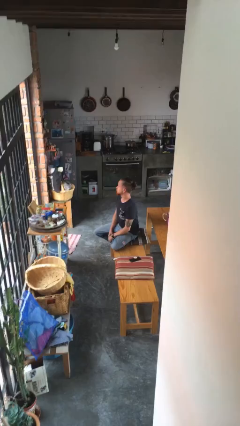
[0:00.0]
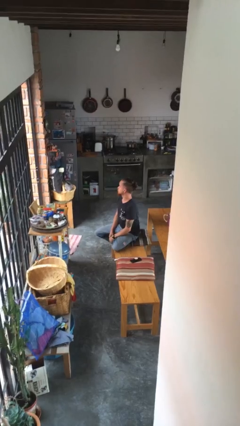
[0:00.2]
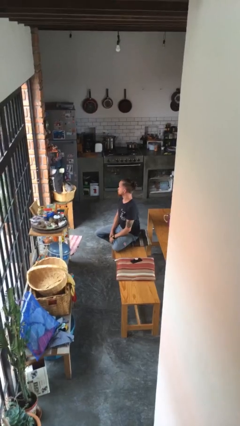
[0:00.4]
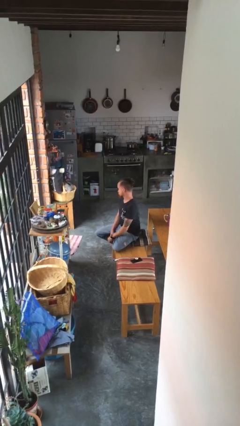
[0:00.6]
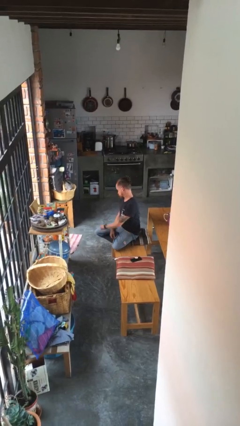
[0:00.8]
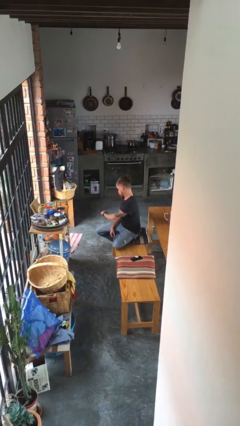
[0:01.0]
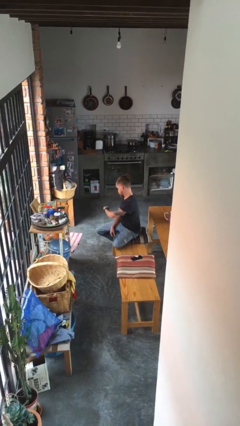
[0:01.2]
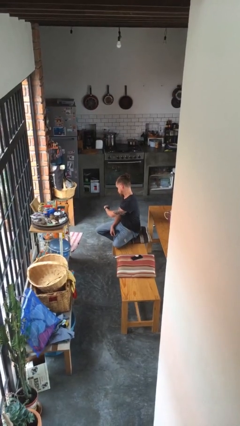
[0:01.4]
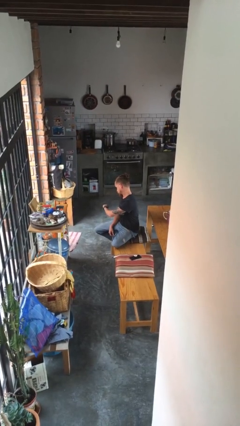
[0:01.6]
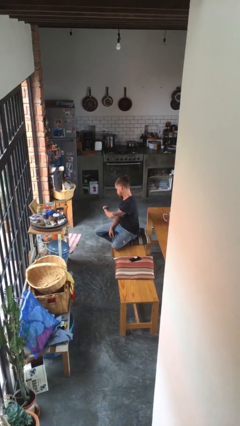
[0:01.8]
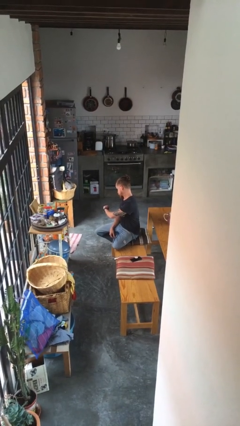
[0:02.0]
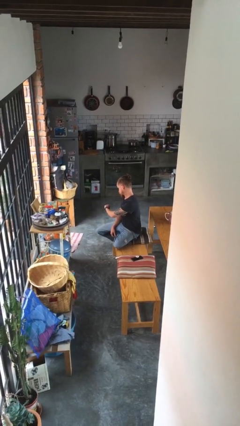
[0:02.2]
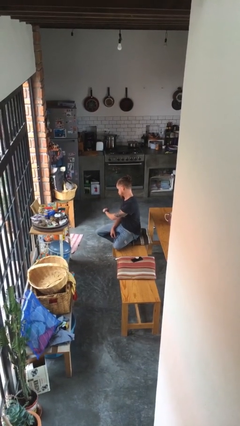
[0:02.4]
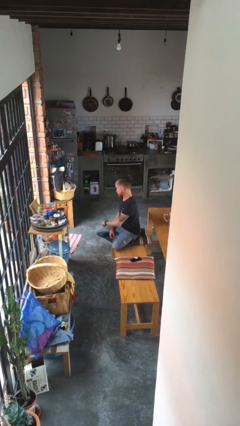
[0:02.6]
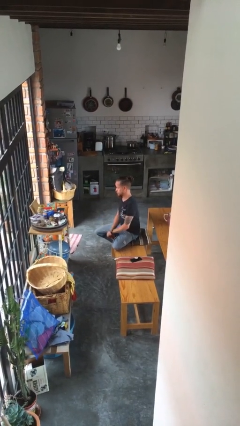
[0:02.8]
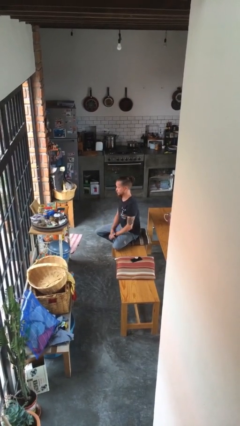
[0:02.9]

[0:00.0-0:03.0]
person looks at wristwatch

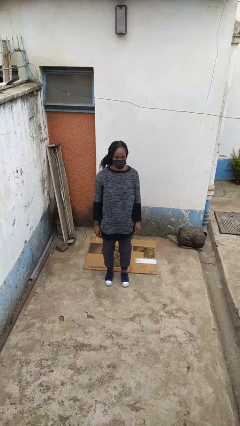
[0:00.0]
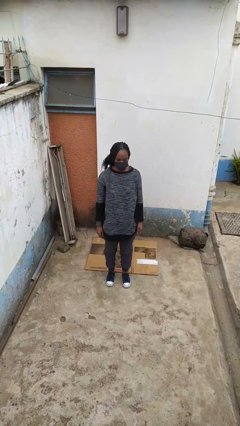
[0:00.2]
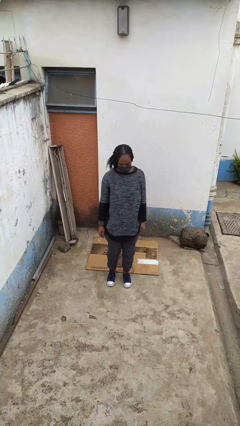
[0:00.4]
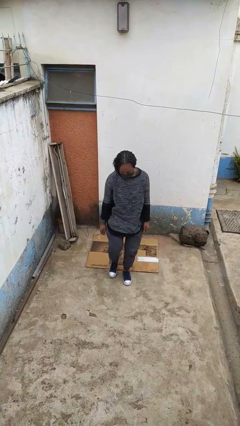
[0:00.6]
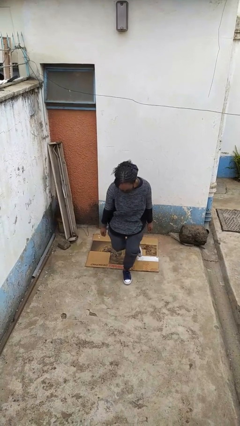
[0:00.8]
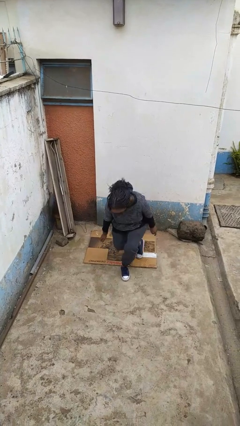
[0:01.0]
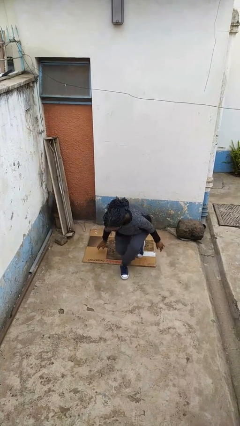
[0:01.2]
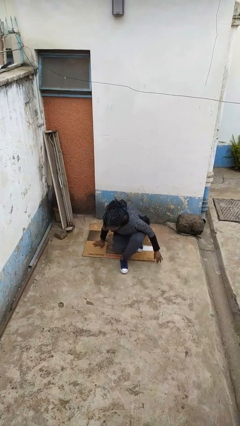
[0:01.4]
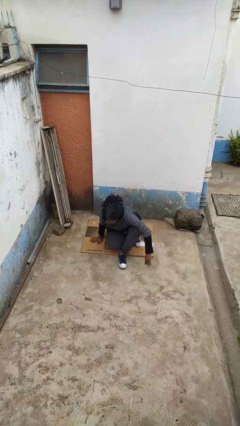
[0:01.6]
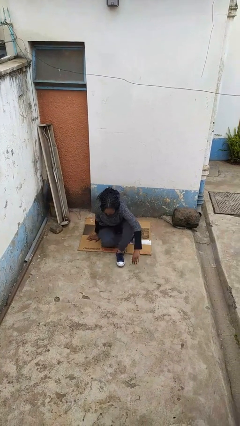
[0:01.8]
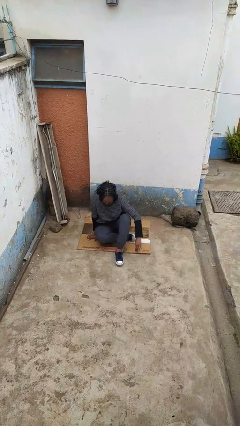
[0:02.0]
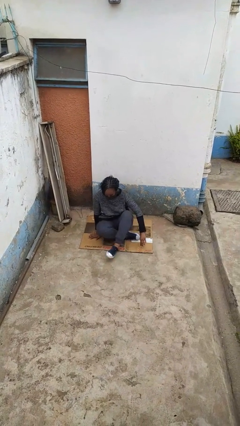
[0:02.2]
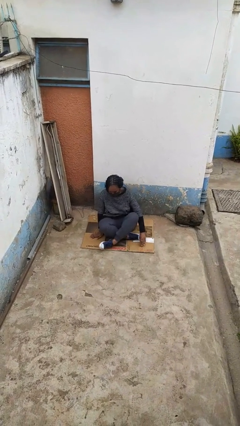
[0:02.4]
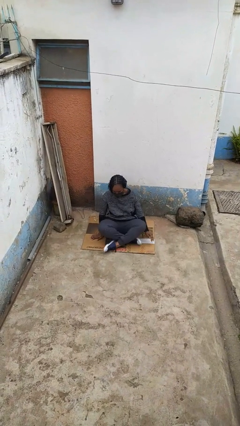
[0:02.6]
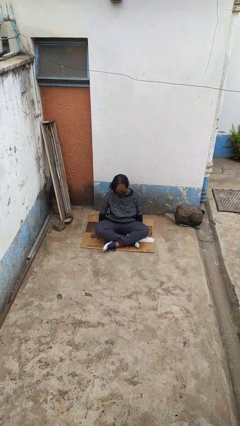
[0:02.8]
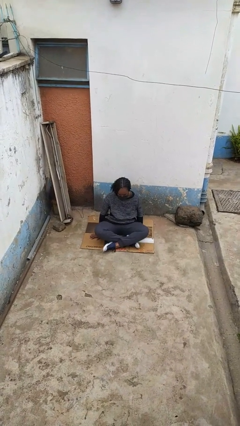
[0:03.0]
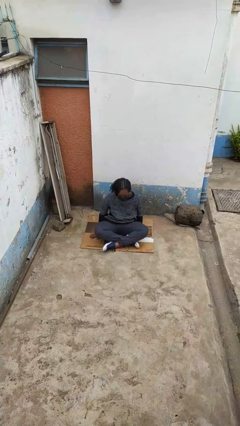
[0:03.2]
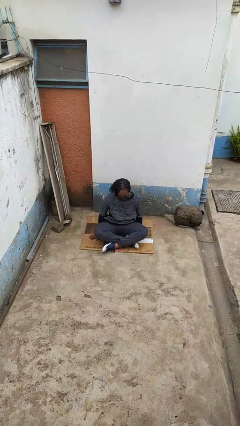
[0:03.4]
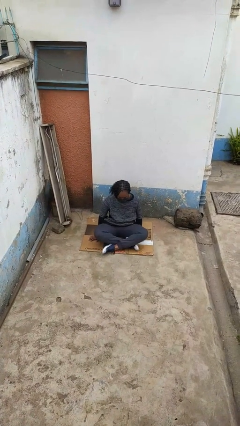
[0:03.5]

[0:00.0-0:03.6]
person sits crisscross

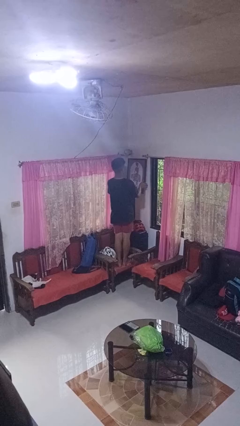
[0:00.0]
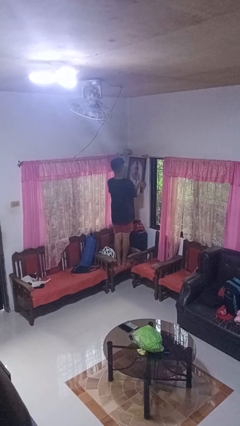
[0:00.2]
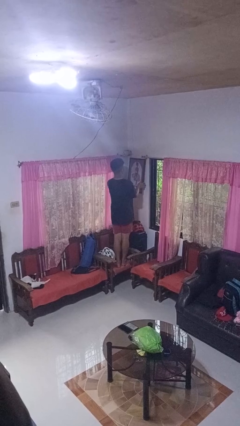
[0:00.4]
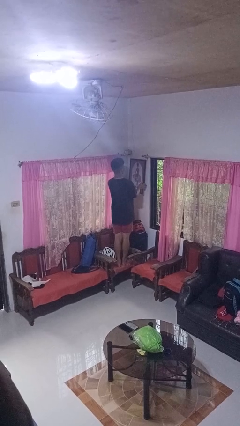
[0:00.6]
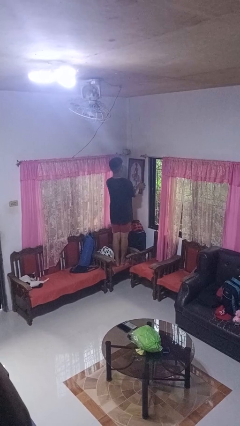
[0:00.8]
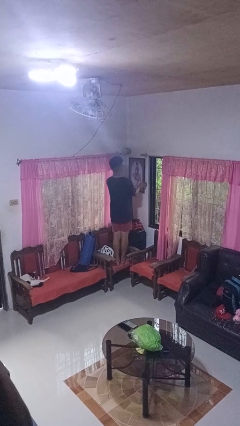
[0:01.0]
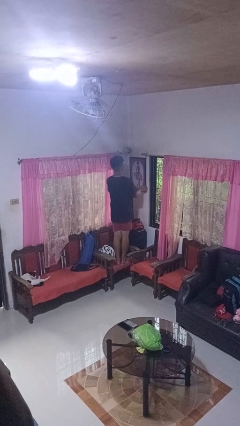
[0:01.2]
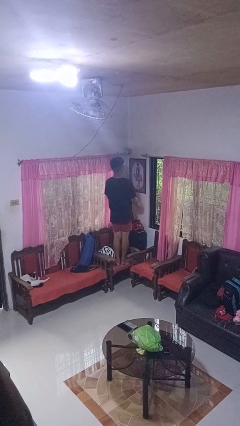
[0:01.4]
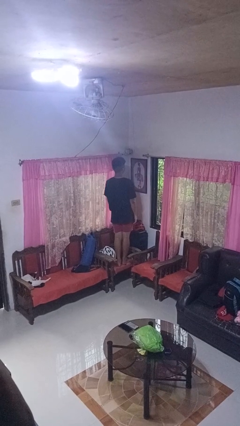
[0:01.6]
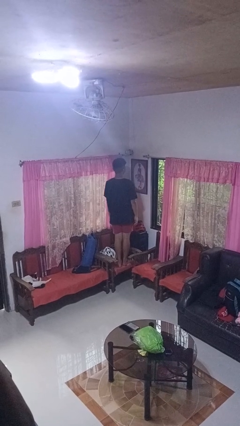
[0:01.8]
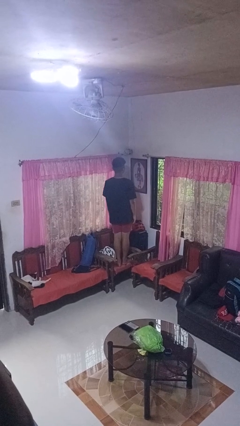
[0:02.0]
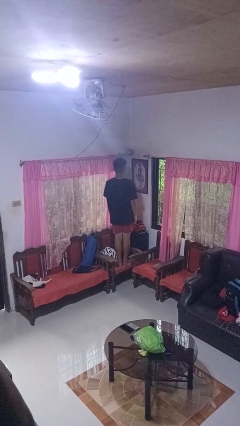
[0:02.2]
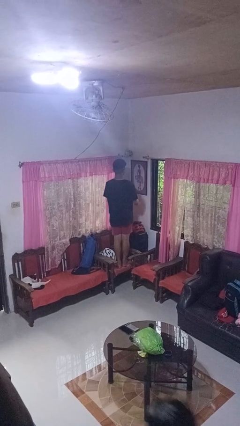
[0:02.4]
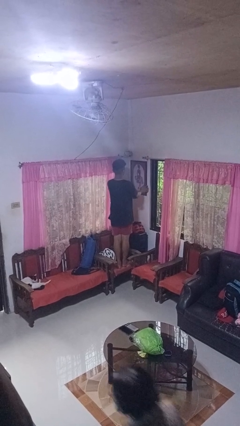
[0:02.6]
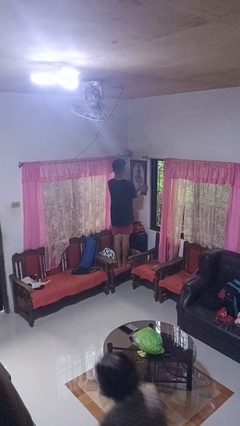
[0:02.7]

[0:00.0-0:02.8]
person puts up picture frame

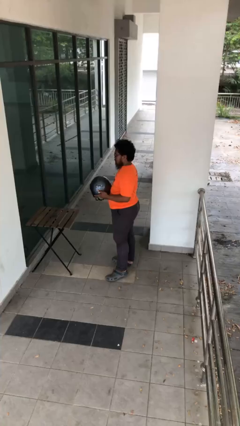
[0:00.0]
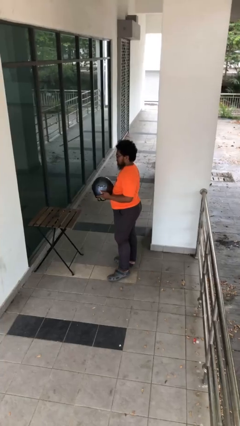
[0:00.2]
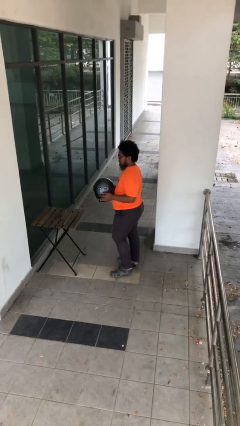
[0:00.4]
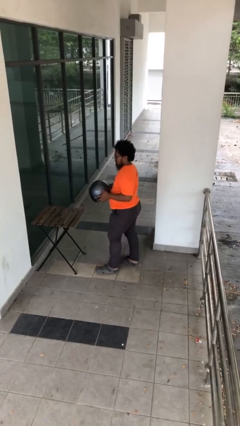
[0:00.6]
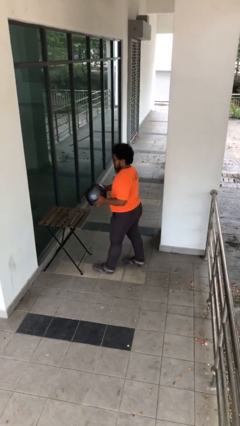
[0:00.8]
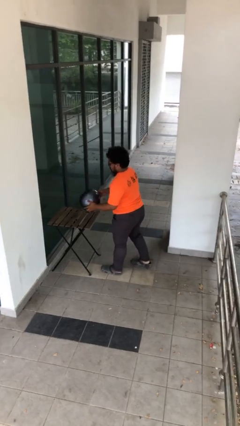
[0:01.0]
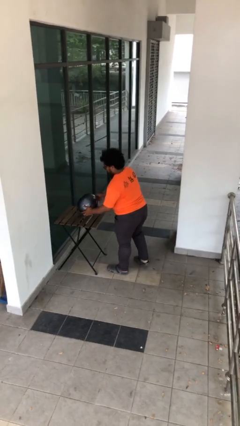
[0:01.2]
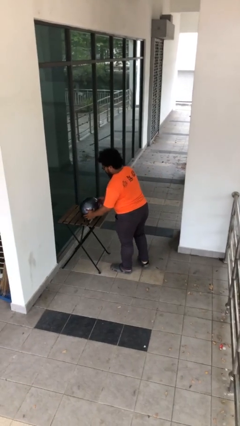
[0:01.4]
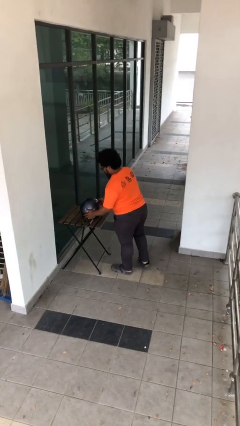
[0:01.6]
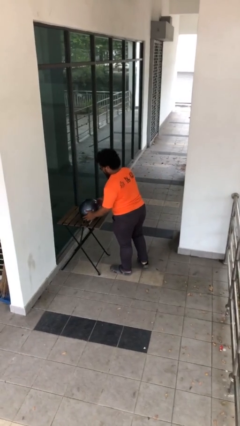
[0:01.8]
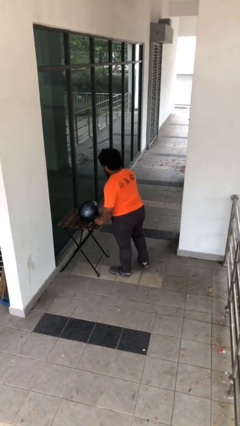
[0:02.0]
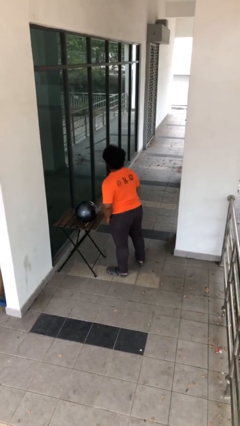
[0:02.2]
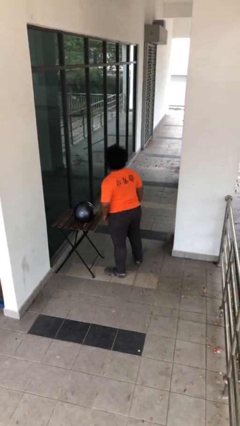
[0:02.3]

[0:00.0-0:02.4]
person puts down object on table

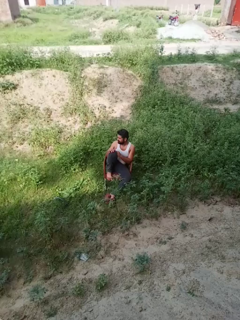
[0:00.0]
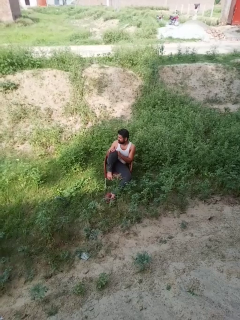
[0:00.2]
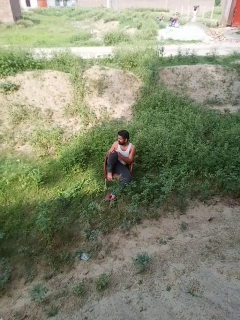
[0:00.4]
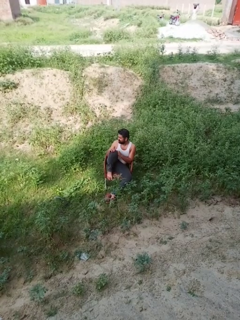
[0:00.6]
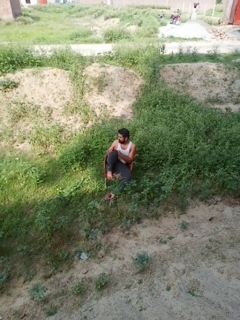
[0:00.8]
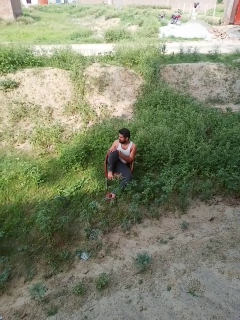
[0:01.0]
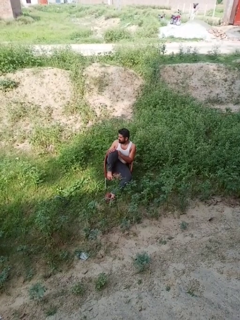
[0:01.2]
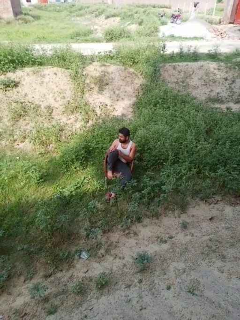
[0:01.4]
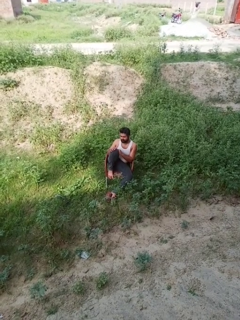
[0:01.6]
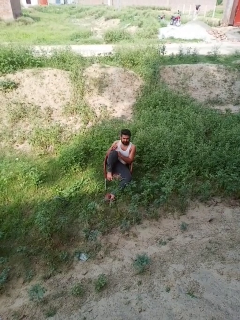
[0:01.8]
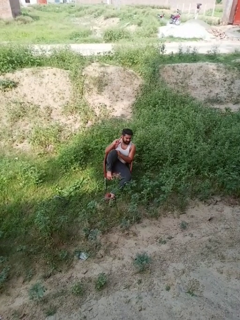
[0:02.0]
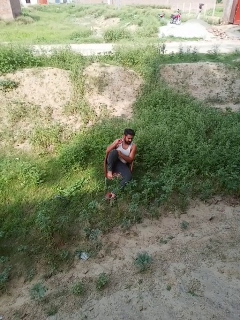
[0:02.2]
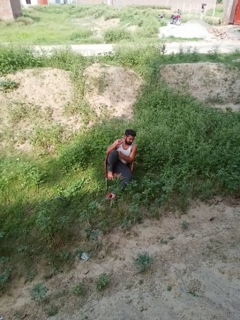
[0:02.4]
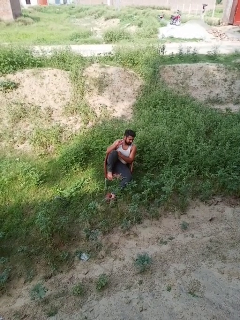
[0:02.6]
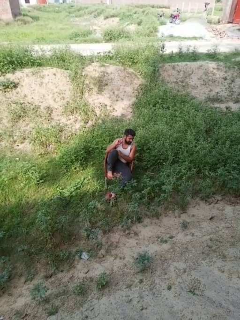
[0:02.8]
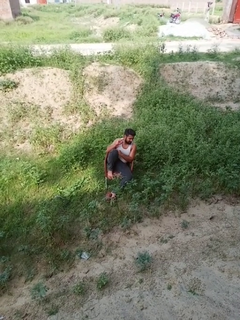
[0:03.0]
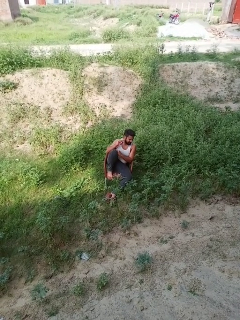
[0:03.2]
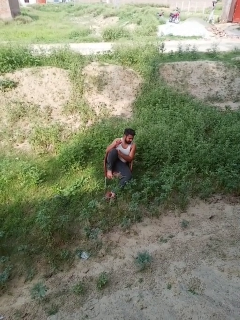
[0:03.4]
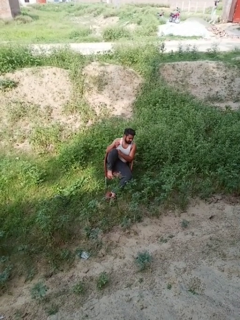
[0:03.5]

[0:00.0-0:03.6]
person touches earlobe

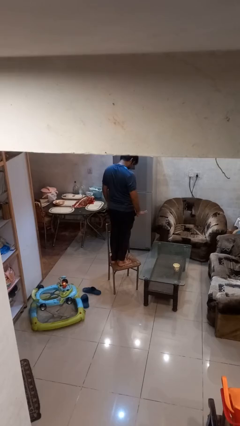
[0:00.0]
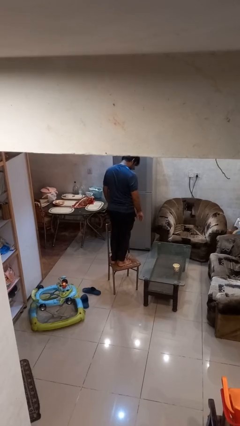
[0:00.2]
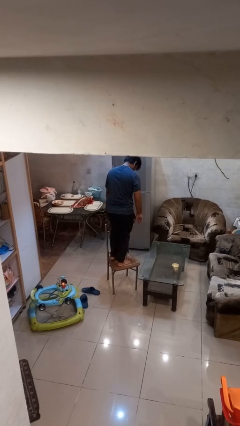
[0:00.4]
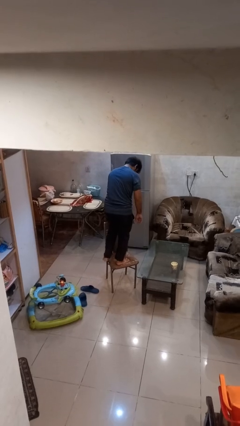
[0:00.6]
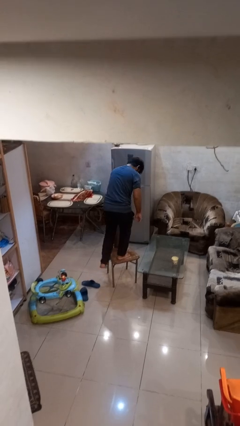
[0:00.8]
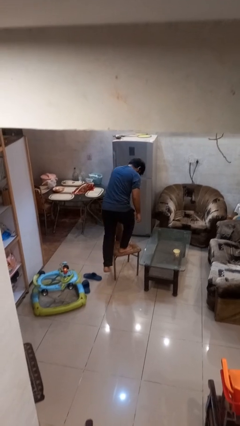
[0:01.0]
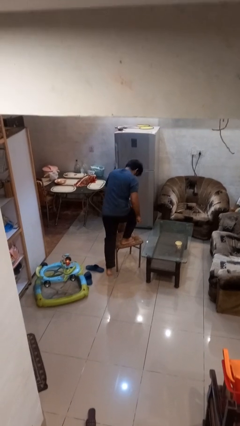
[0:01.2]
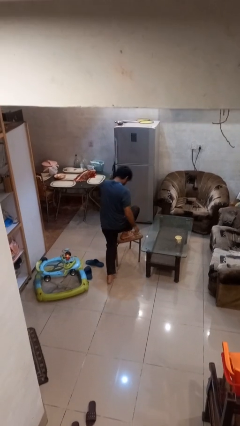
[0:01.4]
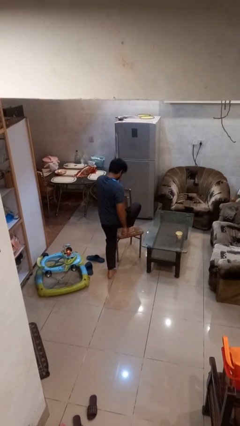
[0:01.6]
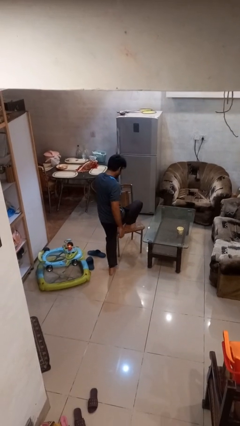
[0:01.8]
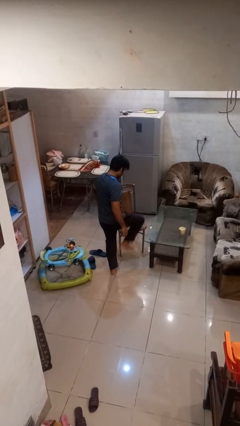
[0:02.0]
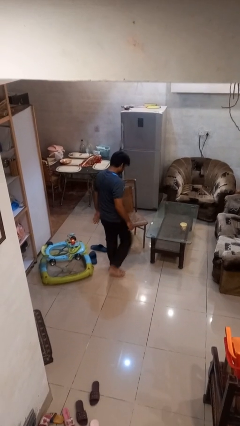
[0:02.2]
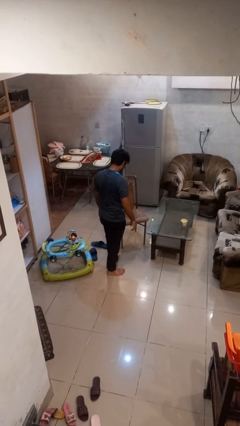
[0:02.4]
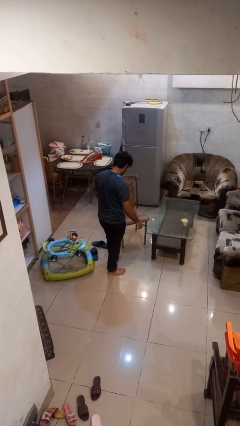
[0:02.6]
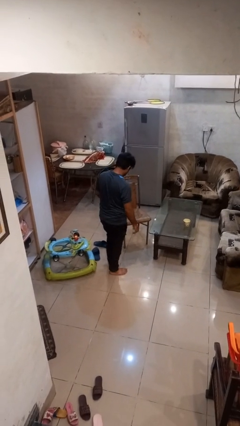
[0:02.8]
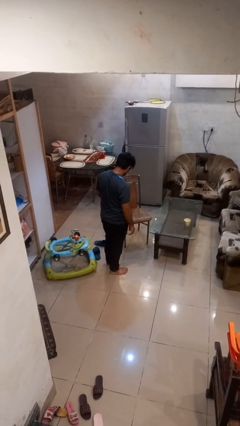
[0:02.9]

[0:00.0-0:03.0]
person climbs off chair
